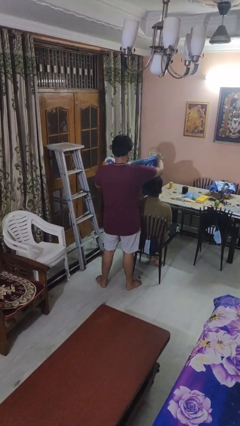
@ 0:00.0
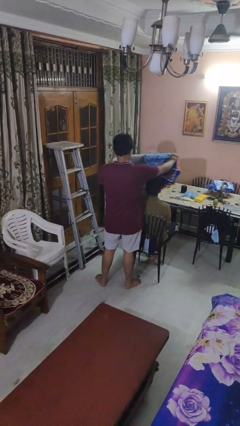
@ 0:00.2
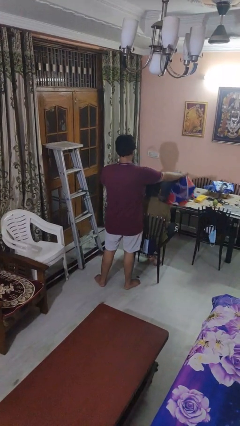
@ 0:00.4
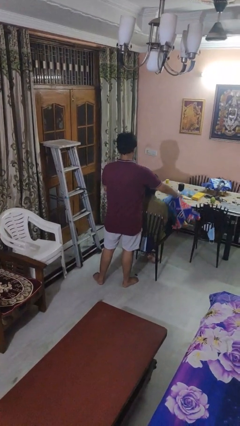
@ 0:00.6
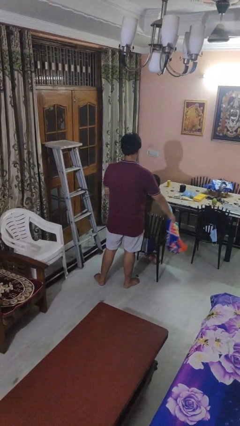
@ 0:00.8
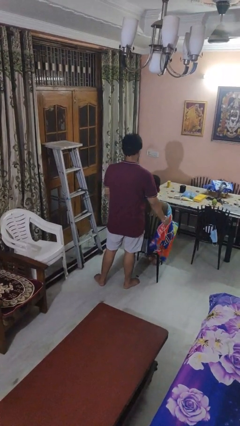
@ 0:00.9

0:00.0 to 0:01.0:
person covers friend with blanket

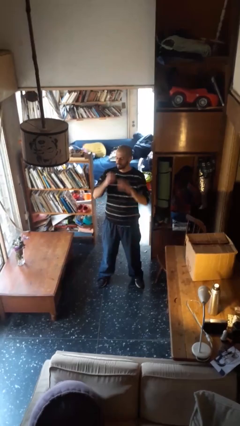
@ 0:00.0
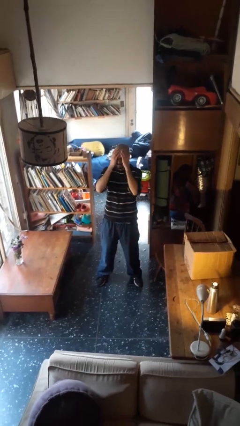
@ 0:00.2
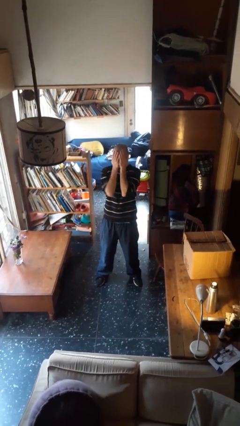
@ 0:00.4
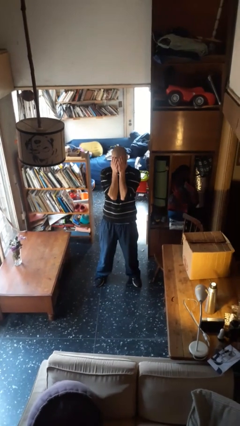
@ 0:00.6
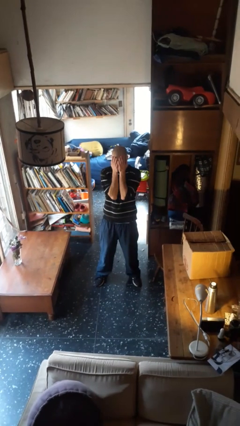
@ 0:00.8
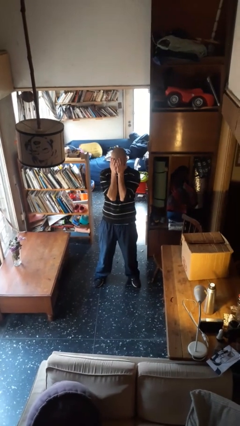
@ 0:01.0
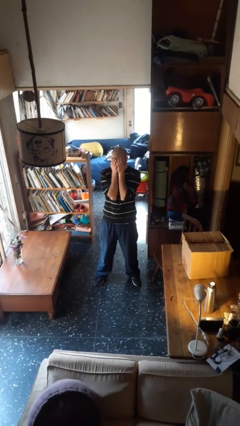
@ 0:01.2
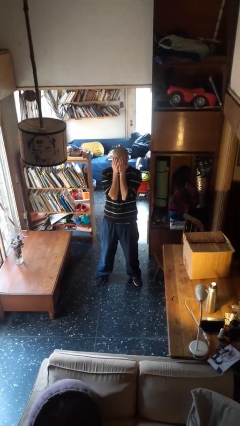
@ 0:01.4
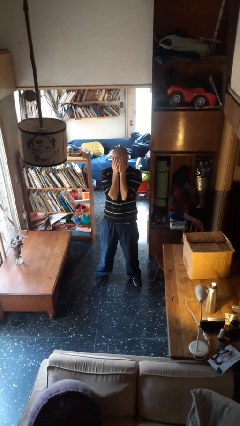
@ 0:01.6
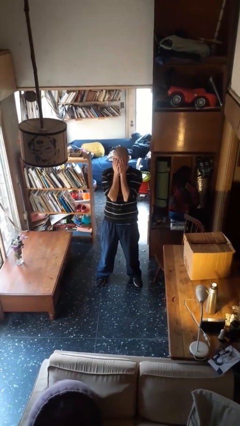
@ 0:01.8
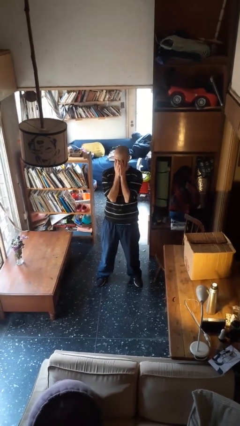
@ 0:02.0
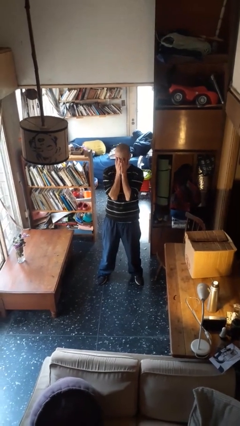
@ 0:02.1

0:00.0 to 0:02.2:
person covers face with hands

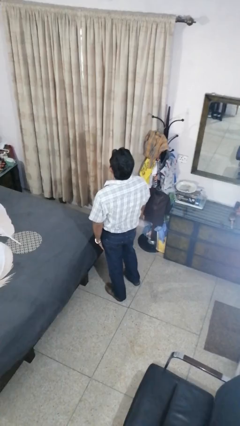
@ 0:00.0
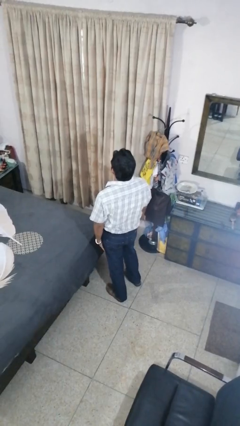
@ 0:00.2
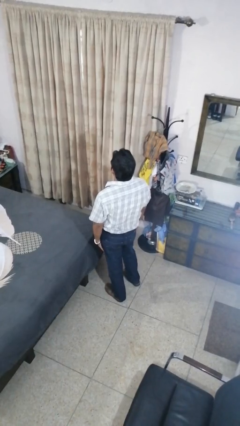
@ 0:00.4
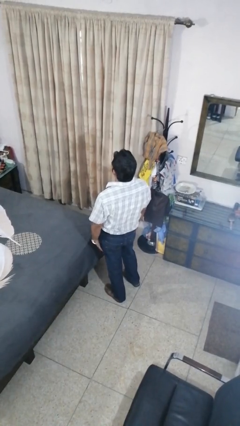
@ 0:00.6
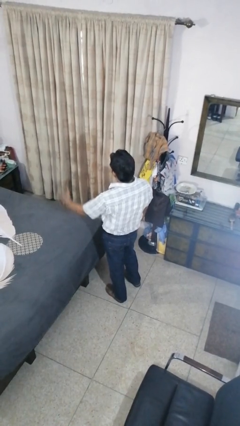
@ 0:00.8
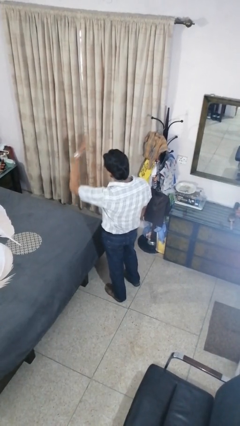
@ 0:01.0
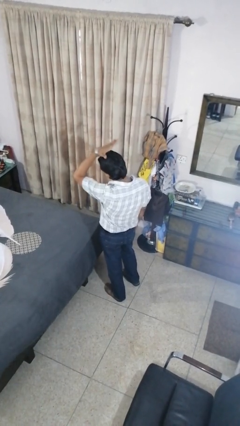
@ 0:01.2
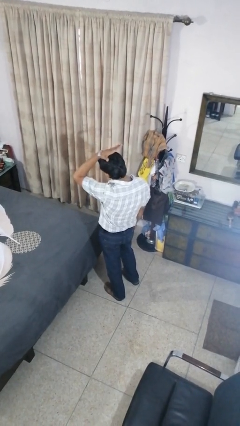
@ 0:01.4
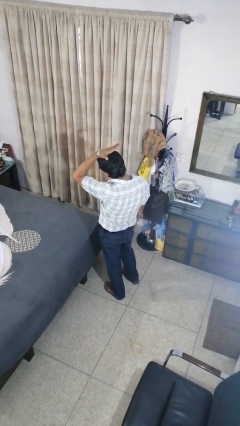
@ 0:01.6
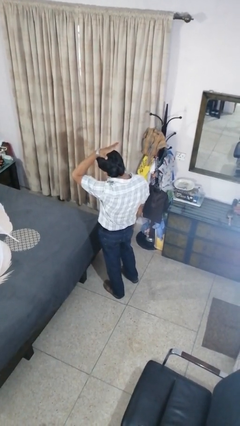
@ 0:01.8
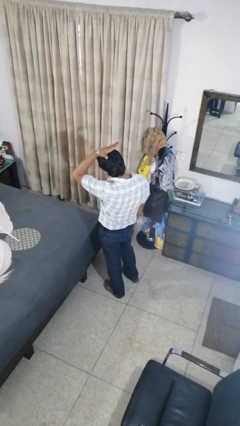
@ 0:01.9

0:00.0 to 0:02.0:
person pats head

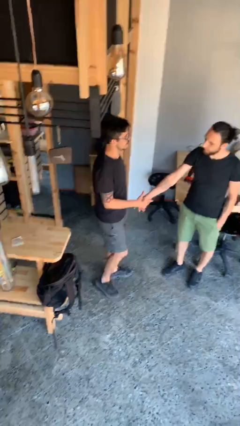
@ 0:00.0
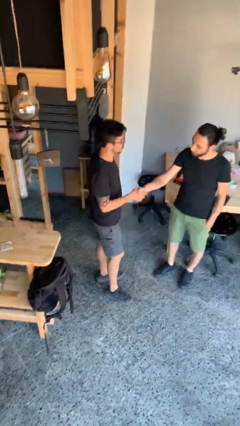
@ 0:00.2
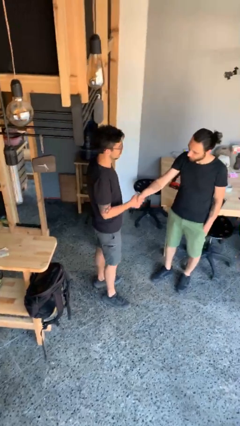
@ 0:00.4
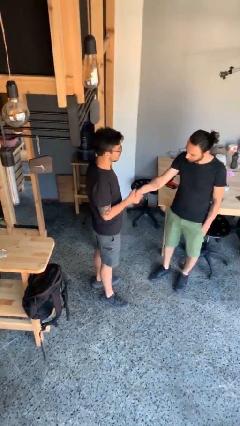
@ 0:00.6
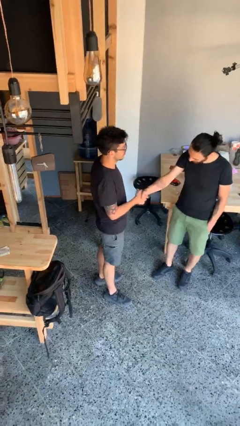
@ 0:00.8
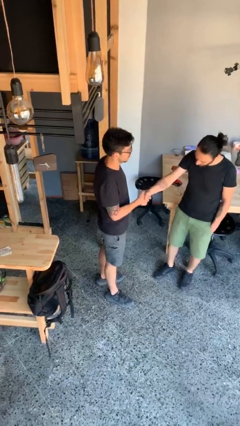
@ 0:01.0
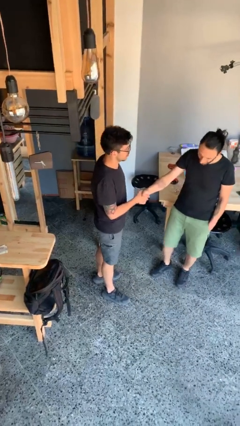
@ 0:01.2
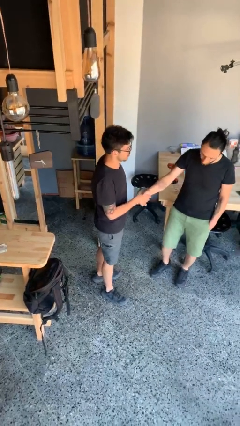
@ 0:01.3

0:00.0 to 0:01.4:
person shakes hand

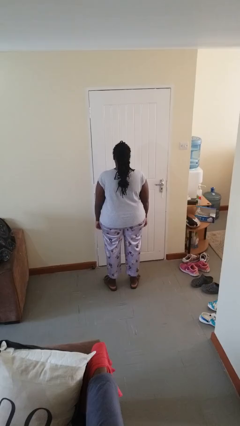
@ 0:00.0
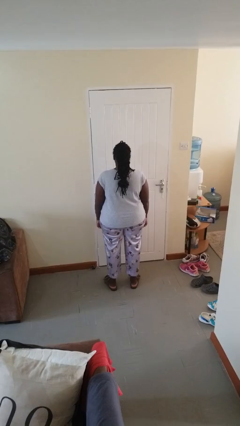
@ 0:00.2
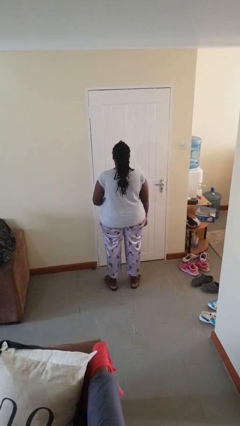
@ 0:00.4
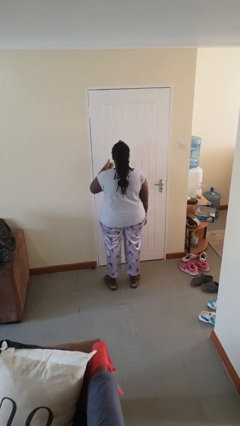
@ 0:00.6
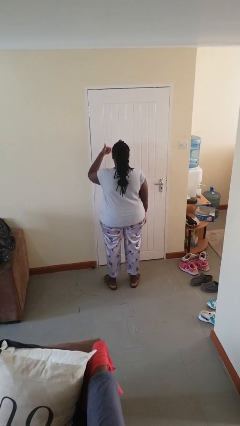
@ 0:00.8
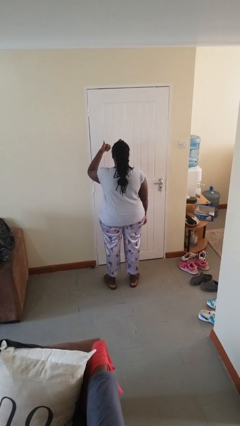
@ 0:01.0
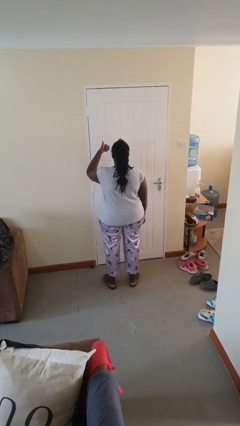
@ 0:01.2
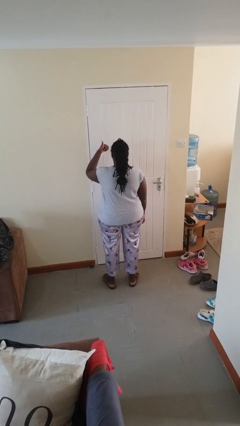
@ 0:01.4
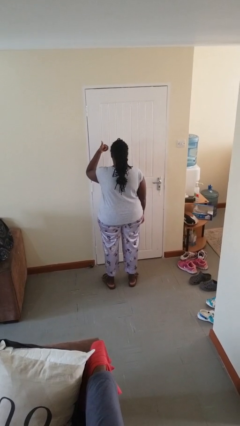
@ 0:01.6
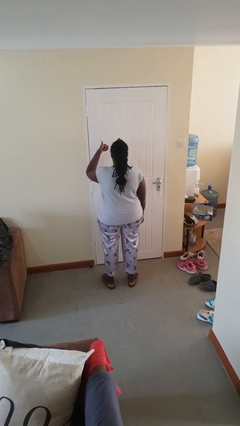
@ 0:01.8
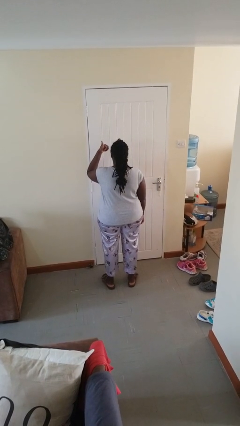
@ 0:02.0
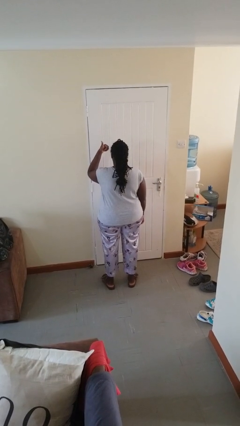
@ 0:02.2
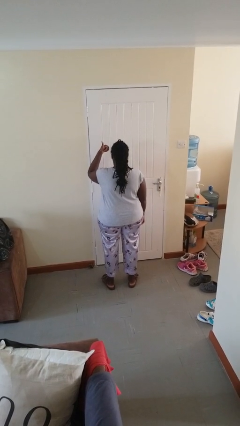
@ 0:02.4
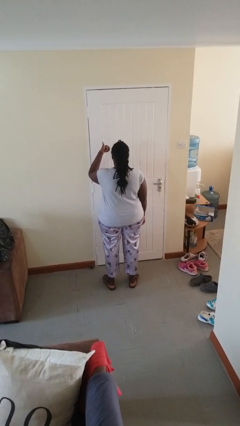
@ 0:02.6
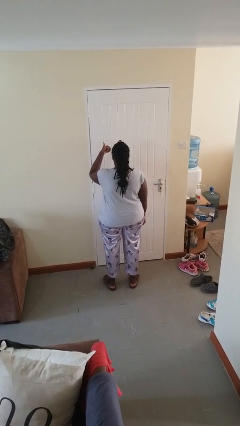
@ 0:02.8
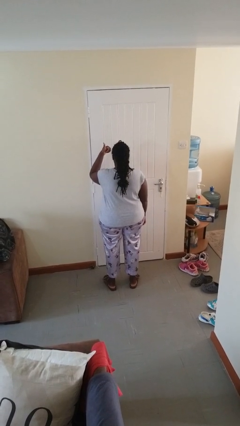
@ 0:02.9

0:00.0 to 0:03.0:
person gestures thumbs up

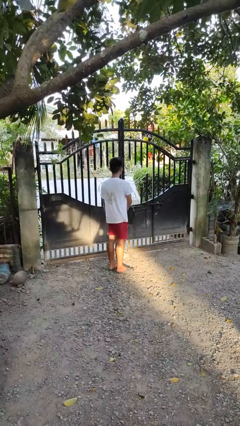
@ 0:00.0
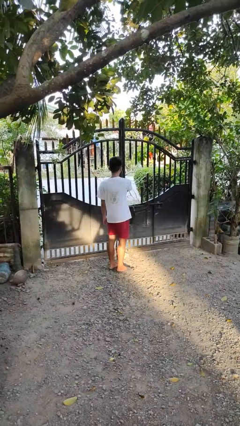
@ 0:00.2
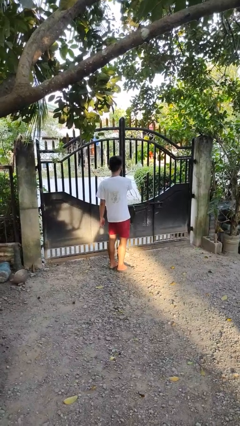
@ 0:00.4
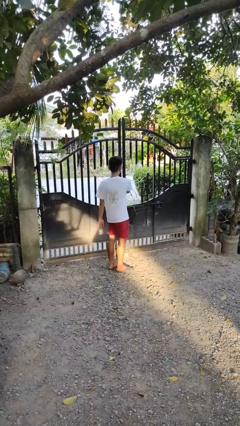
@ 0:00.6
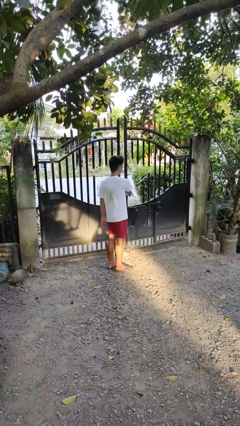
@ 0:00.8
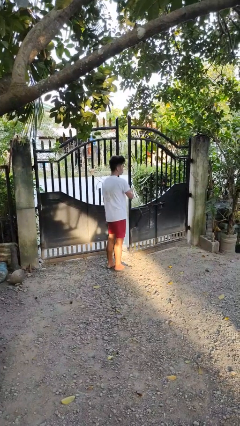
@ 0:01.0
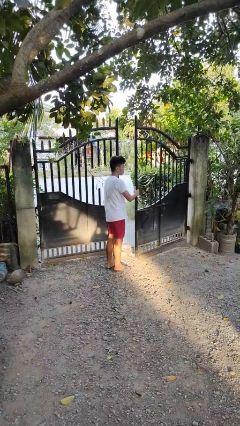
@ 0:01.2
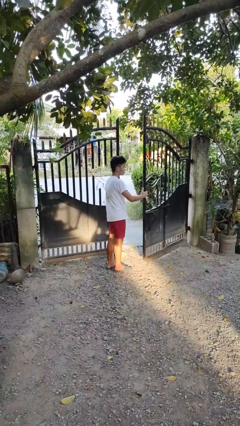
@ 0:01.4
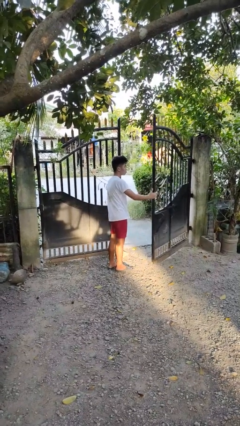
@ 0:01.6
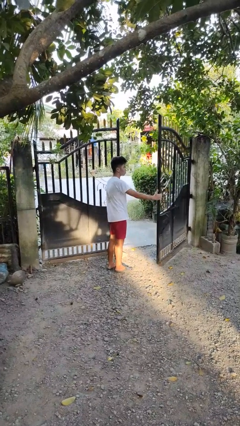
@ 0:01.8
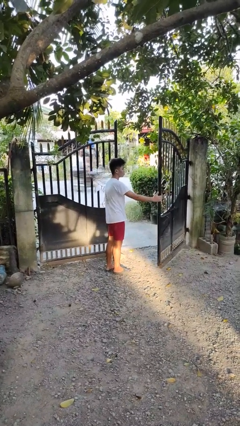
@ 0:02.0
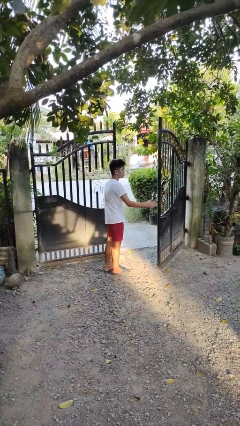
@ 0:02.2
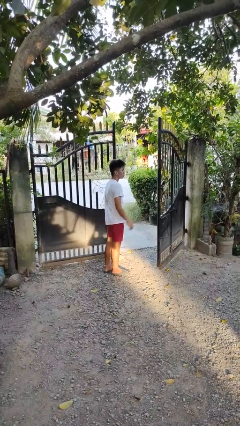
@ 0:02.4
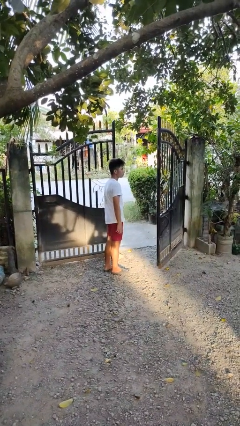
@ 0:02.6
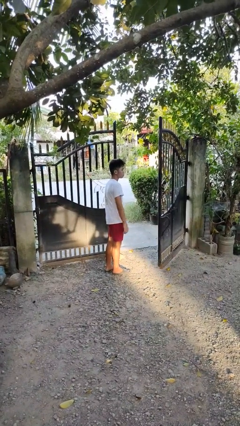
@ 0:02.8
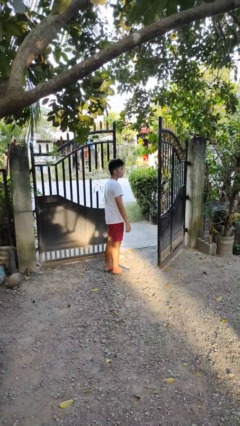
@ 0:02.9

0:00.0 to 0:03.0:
person opens gate

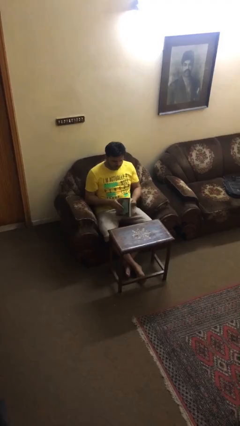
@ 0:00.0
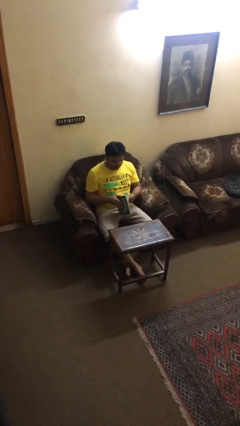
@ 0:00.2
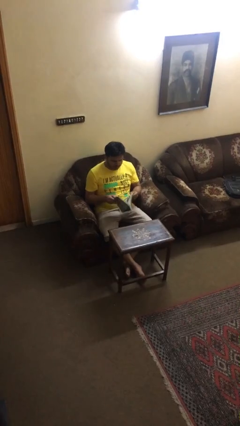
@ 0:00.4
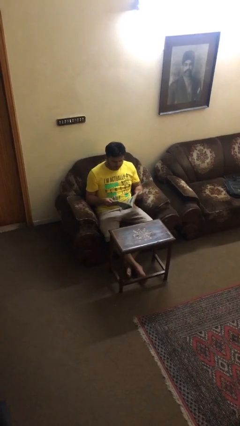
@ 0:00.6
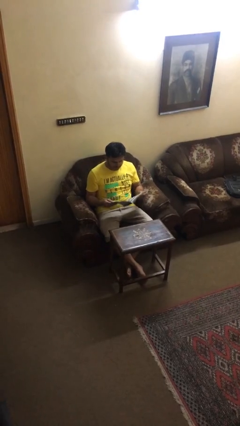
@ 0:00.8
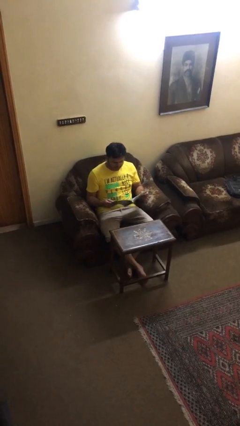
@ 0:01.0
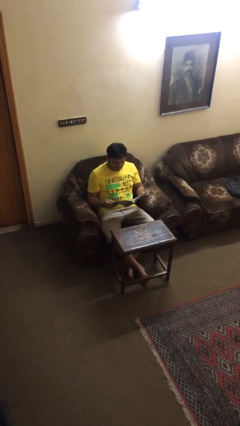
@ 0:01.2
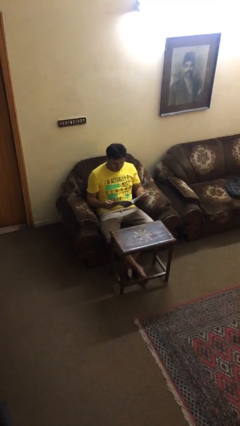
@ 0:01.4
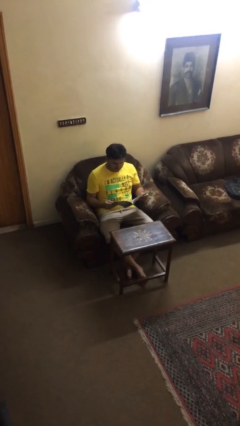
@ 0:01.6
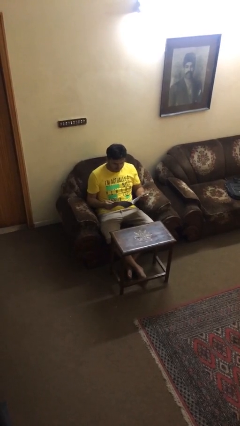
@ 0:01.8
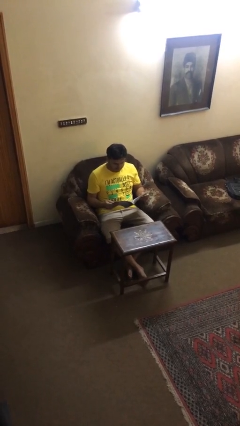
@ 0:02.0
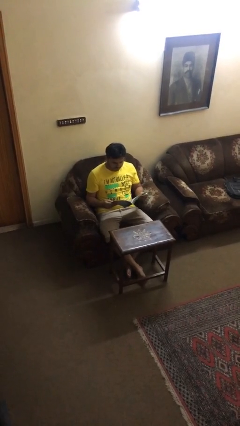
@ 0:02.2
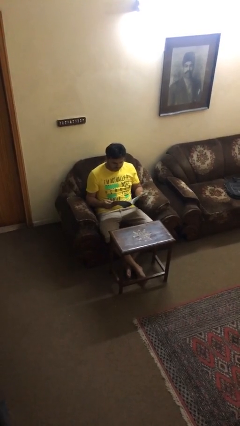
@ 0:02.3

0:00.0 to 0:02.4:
person reads document

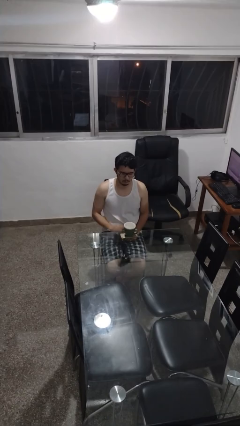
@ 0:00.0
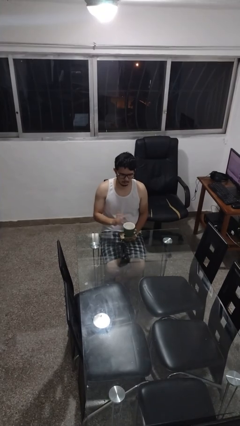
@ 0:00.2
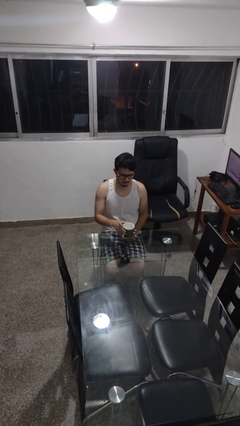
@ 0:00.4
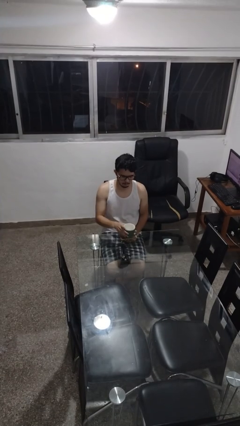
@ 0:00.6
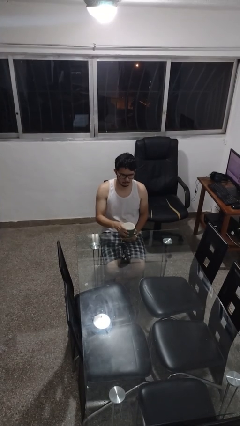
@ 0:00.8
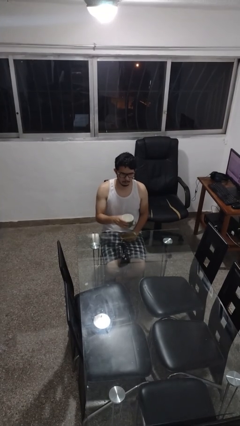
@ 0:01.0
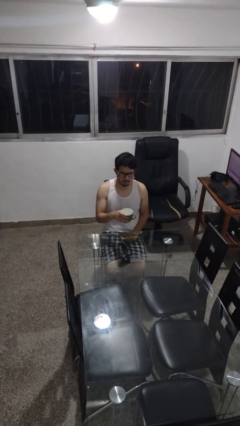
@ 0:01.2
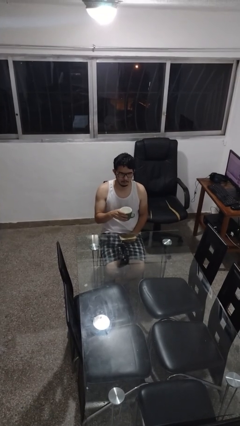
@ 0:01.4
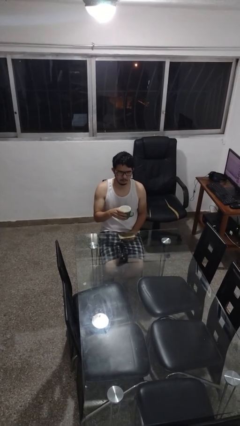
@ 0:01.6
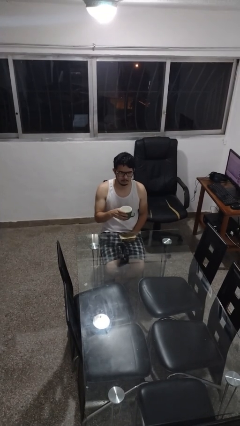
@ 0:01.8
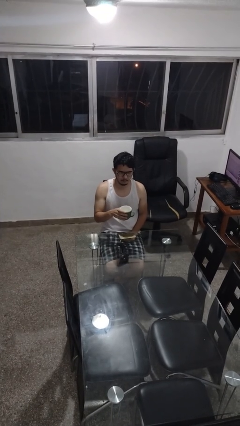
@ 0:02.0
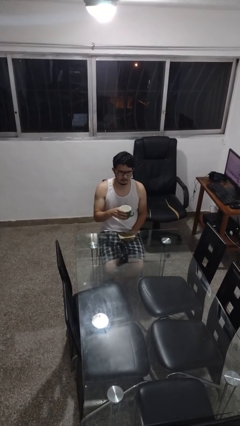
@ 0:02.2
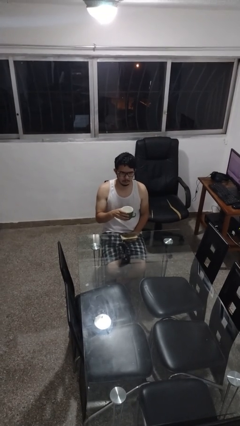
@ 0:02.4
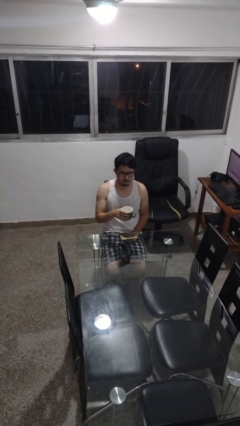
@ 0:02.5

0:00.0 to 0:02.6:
person picks up object from table
